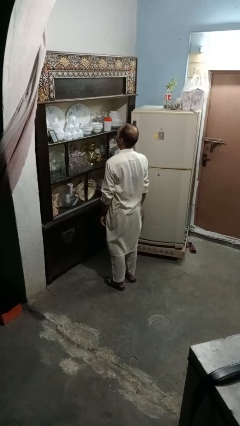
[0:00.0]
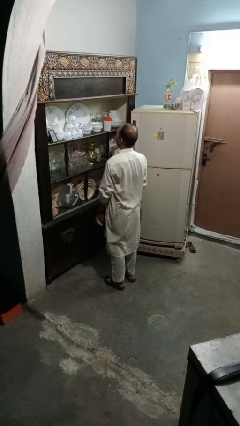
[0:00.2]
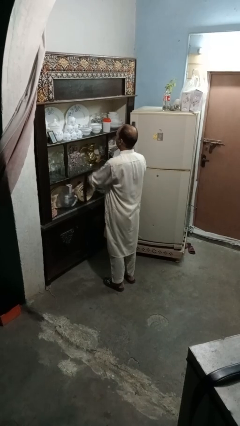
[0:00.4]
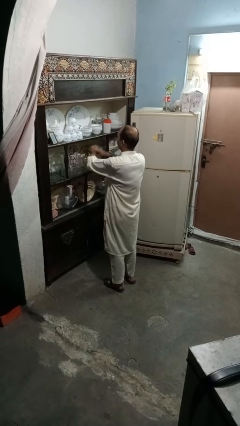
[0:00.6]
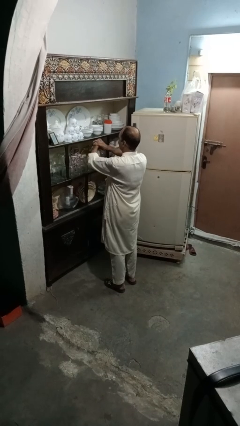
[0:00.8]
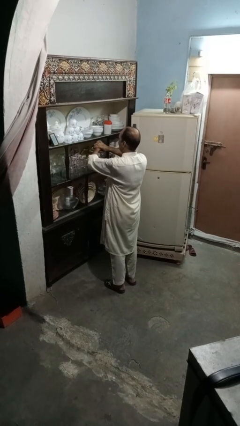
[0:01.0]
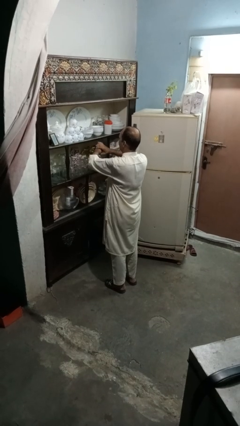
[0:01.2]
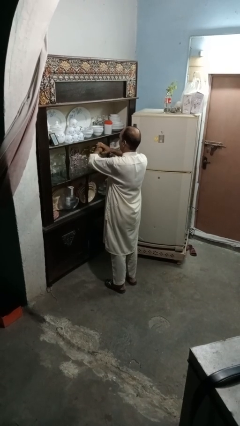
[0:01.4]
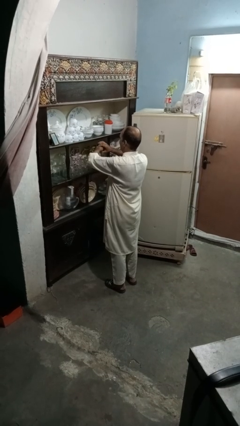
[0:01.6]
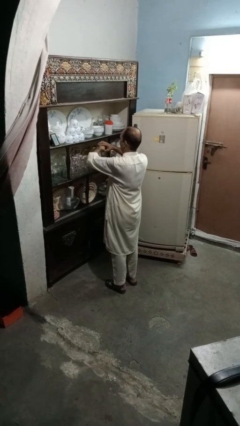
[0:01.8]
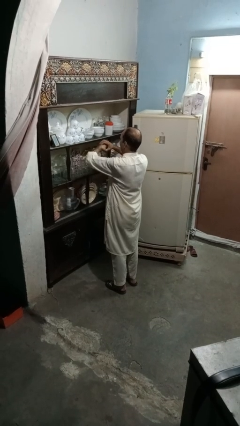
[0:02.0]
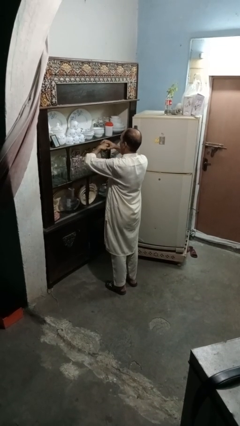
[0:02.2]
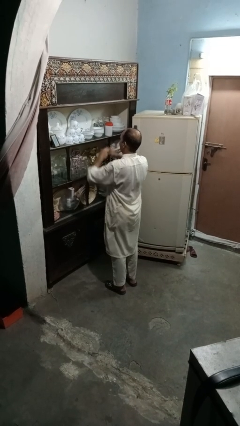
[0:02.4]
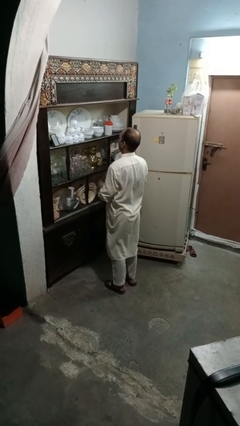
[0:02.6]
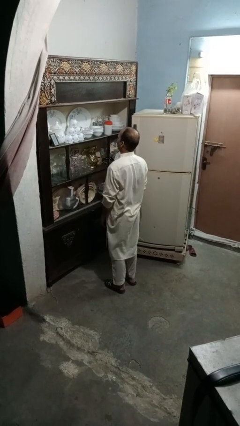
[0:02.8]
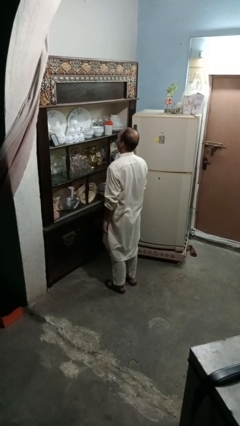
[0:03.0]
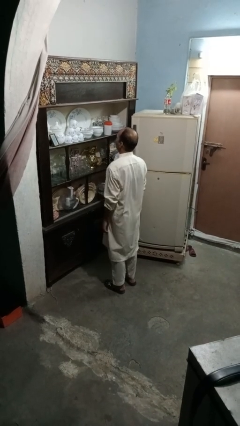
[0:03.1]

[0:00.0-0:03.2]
person takes off wristwatch

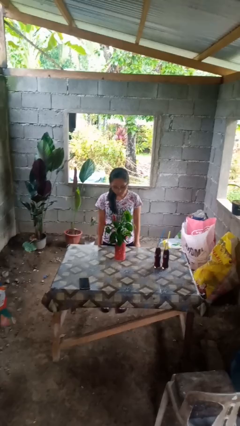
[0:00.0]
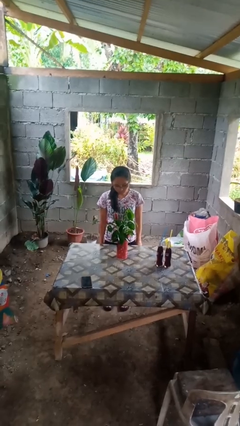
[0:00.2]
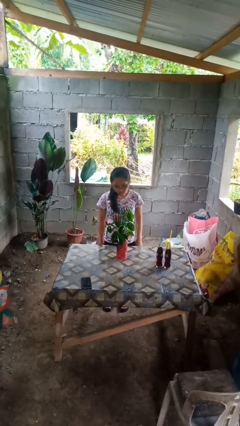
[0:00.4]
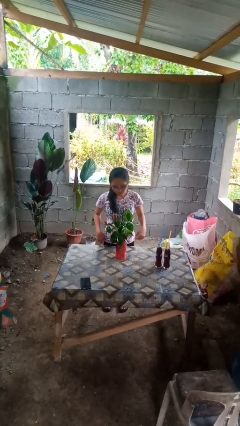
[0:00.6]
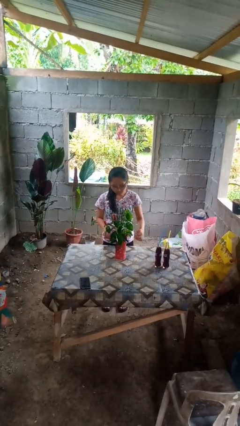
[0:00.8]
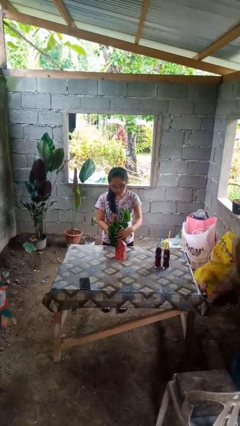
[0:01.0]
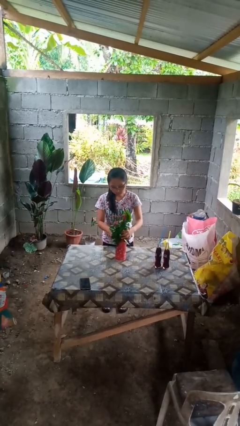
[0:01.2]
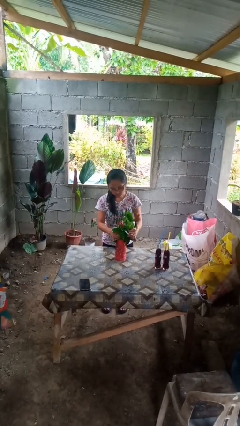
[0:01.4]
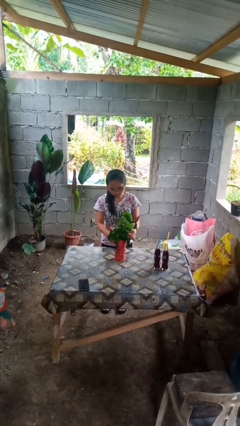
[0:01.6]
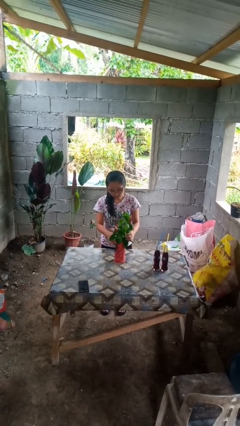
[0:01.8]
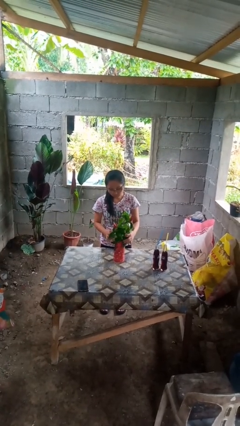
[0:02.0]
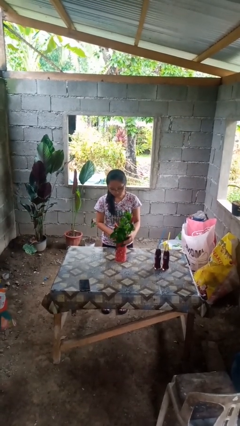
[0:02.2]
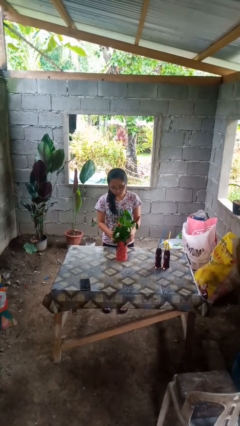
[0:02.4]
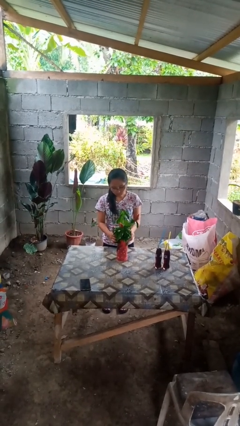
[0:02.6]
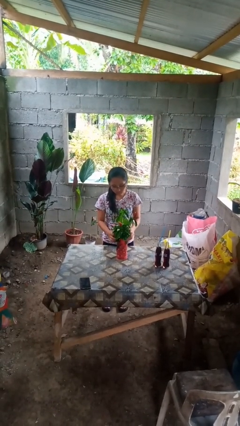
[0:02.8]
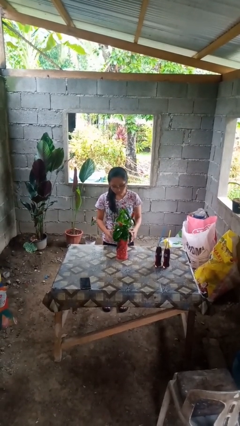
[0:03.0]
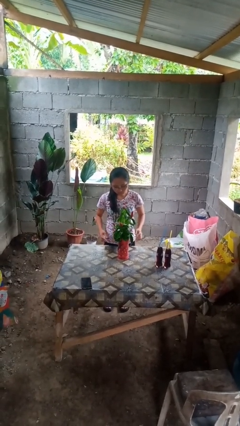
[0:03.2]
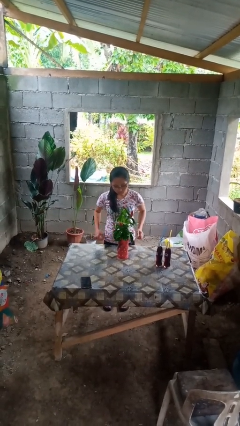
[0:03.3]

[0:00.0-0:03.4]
person arranges flowers in vase

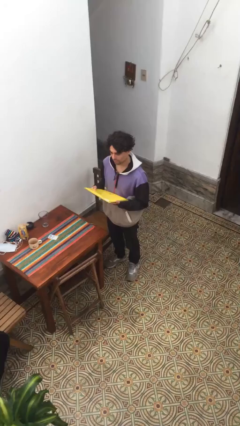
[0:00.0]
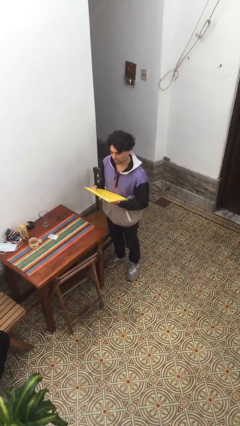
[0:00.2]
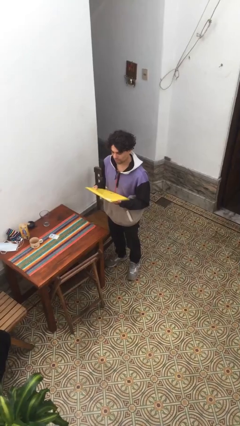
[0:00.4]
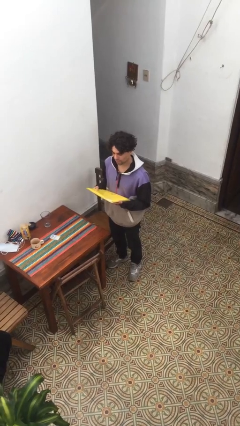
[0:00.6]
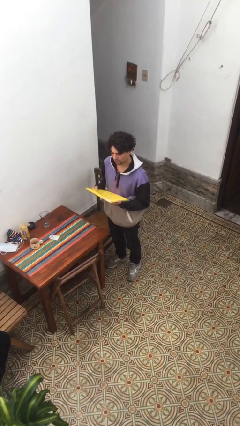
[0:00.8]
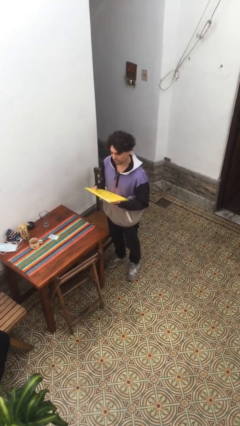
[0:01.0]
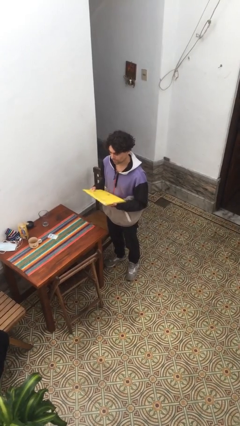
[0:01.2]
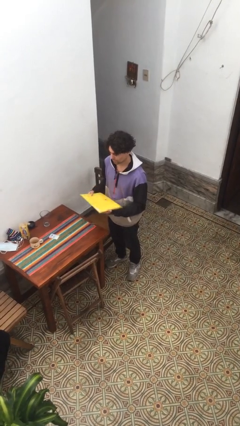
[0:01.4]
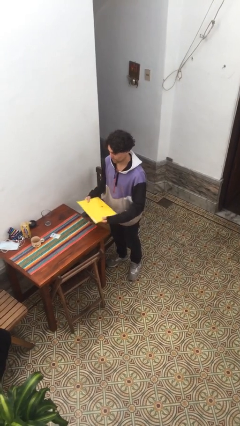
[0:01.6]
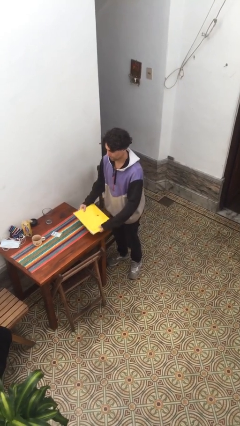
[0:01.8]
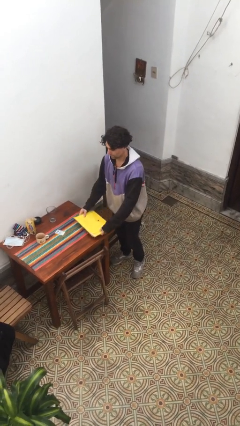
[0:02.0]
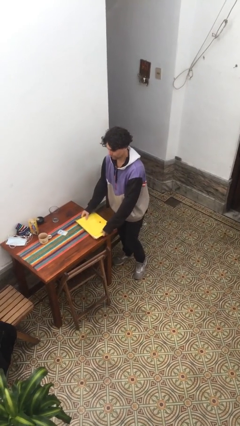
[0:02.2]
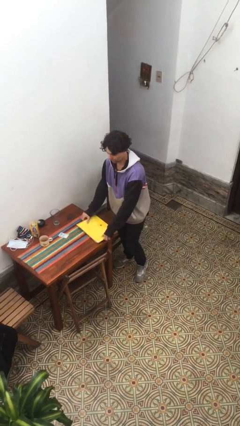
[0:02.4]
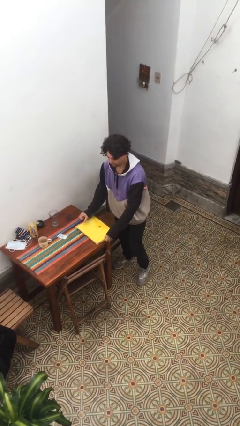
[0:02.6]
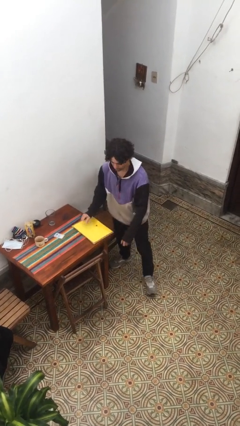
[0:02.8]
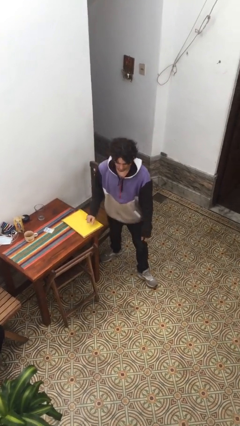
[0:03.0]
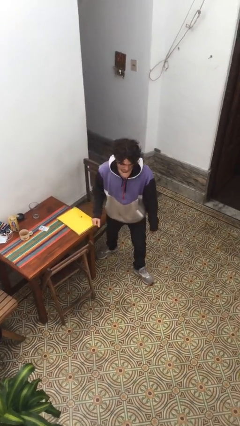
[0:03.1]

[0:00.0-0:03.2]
person puts down object on table

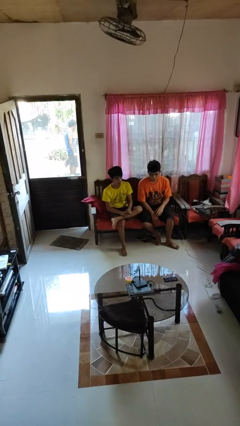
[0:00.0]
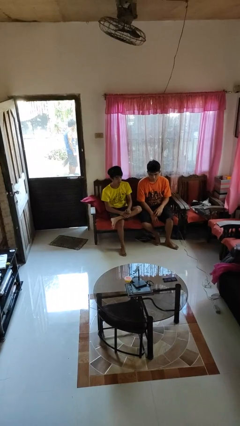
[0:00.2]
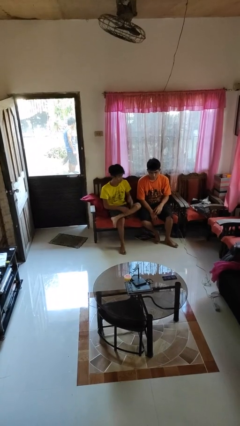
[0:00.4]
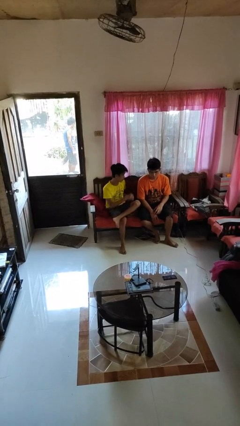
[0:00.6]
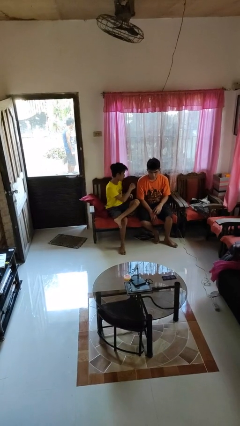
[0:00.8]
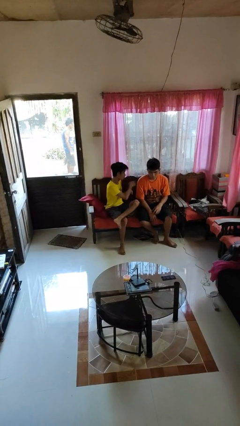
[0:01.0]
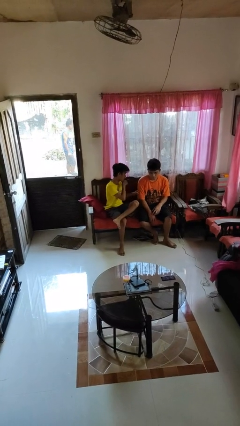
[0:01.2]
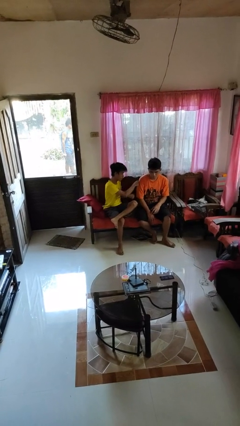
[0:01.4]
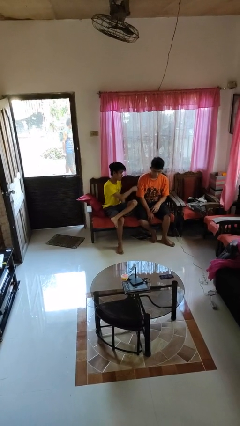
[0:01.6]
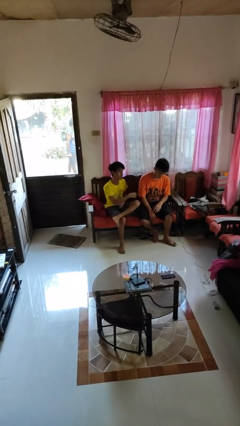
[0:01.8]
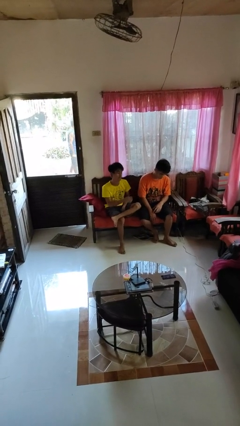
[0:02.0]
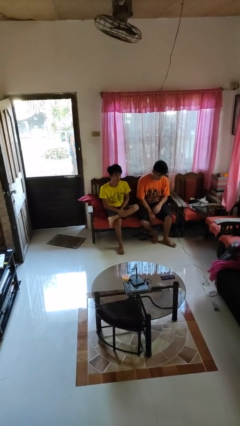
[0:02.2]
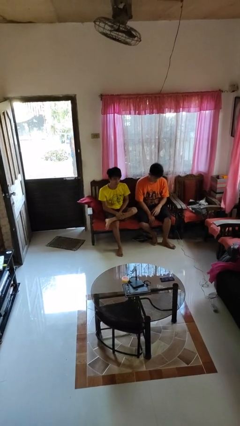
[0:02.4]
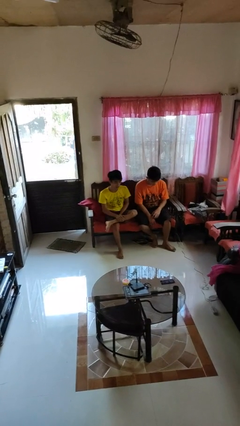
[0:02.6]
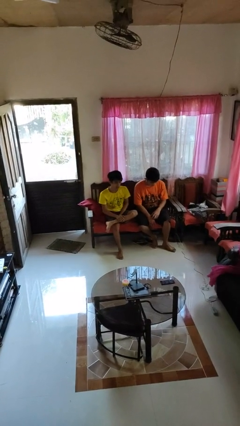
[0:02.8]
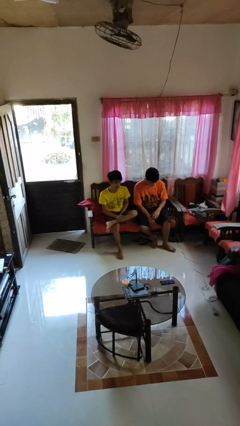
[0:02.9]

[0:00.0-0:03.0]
person pounds shoulders of person

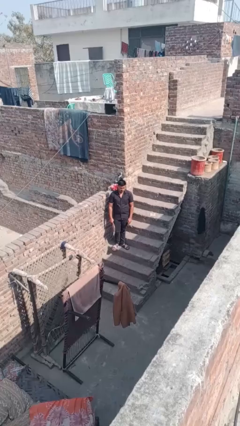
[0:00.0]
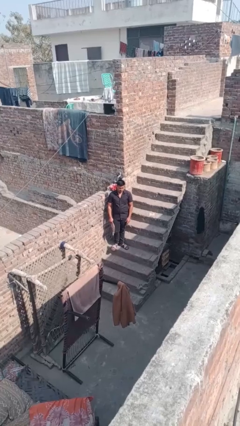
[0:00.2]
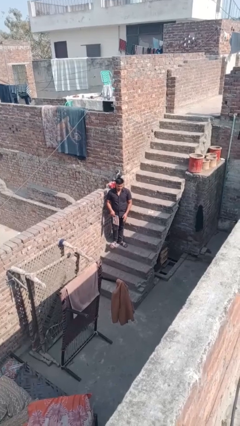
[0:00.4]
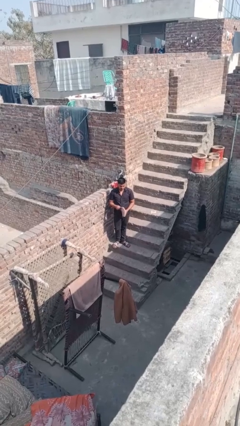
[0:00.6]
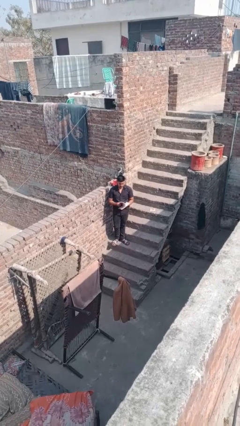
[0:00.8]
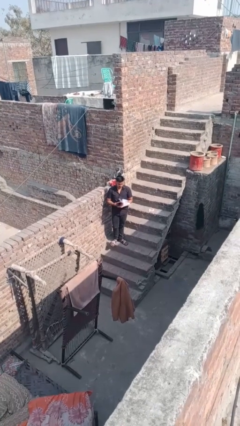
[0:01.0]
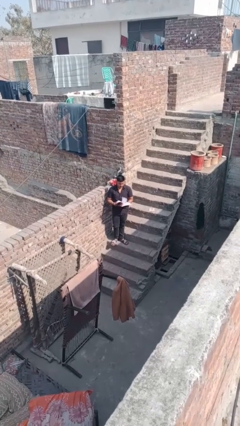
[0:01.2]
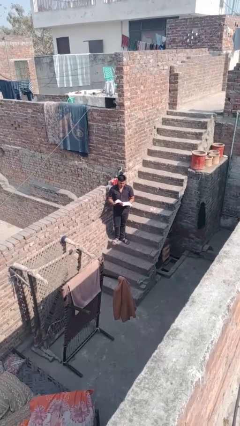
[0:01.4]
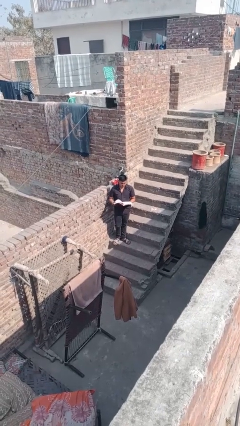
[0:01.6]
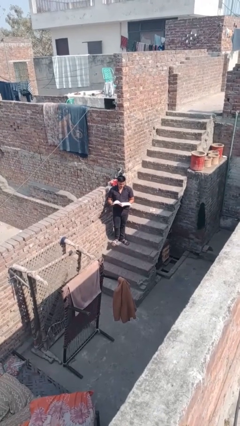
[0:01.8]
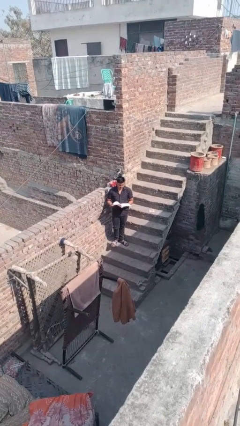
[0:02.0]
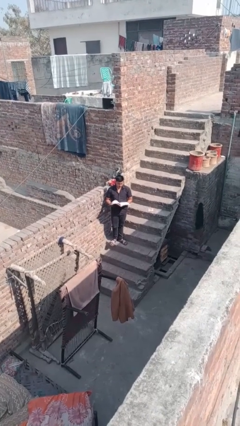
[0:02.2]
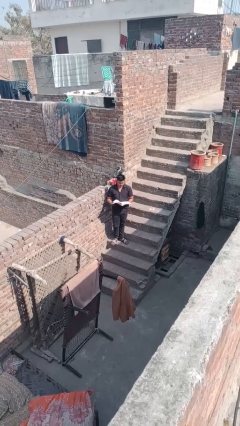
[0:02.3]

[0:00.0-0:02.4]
person reads document

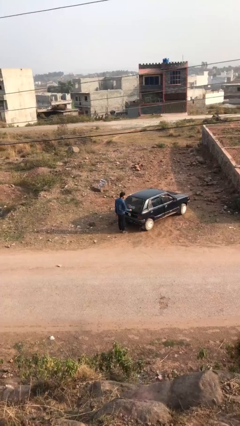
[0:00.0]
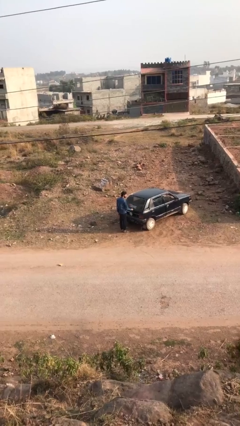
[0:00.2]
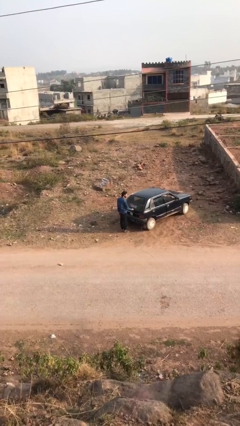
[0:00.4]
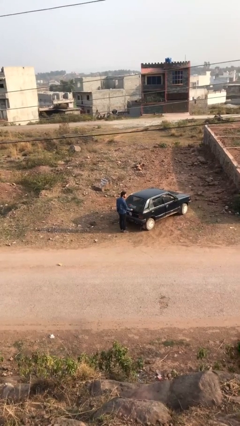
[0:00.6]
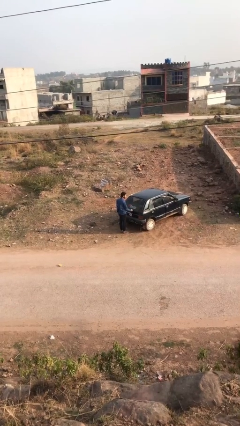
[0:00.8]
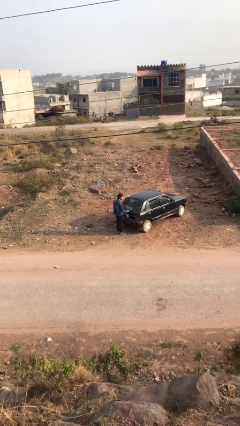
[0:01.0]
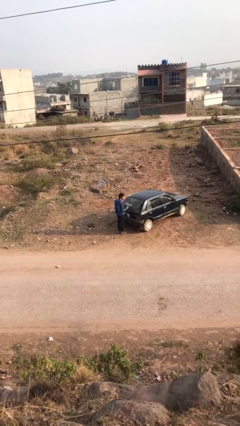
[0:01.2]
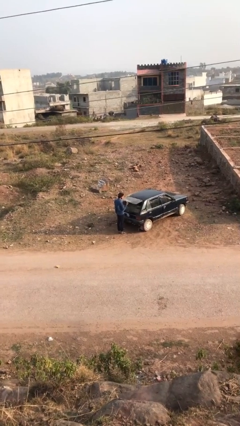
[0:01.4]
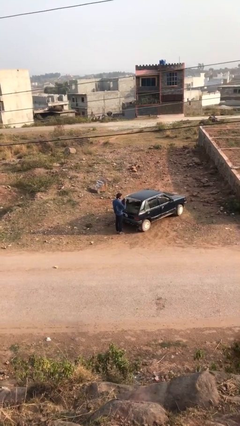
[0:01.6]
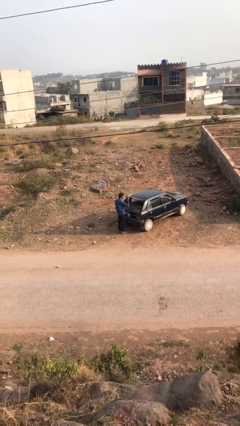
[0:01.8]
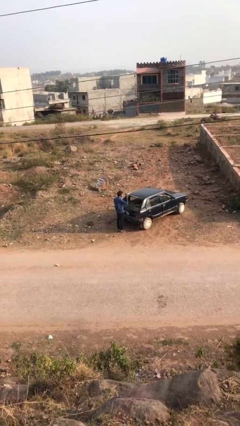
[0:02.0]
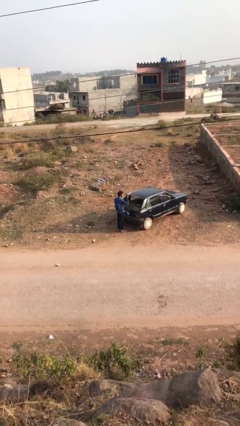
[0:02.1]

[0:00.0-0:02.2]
person opens car trunk

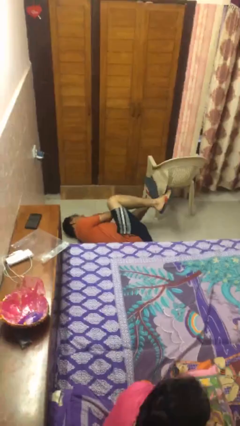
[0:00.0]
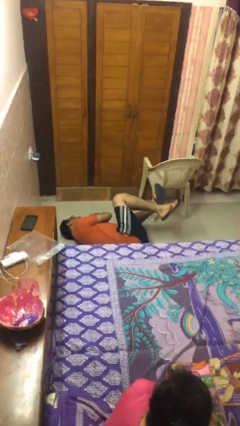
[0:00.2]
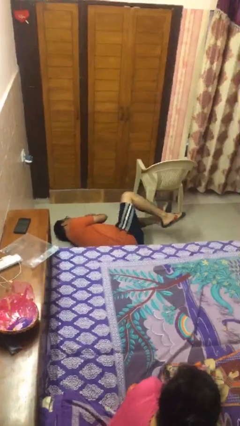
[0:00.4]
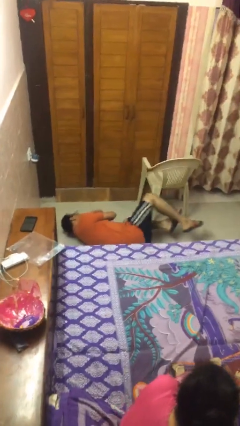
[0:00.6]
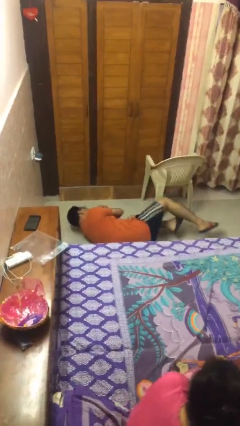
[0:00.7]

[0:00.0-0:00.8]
person lies down on floor
